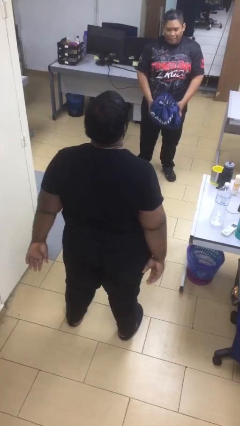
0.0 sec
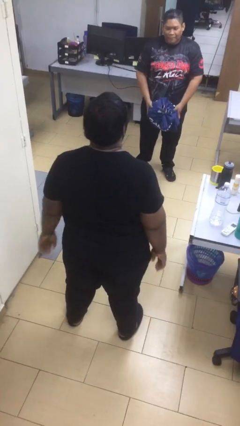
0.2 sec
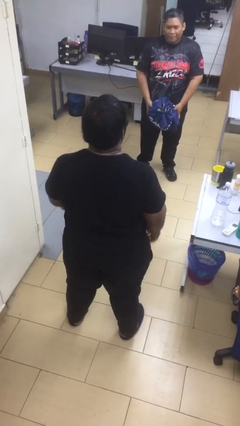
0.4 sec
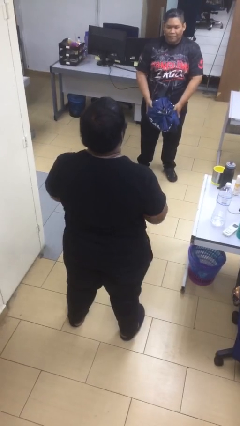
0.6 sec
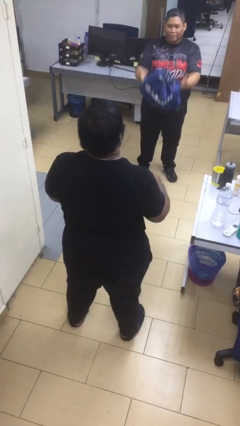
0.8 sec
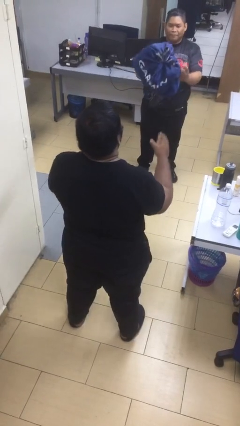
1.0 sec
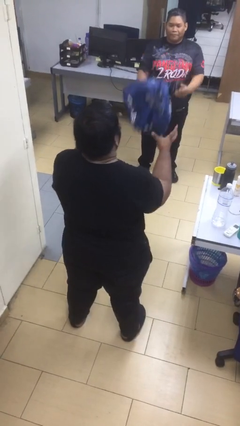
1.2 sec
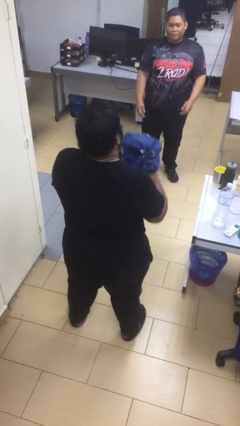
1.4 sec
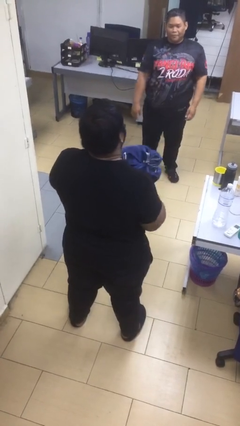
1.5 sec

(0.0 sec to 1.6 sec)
person catches object from person

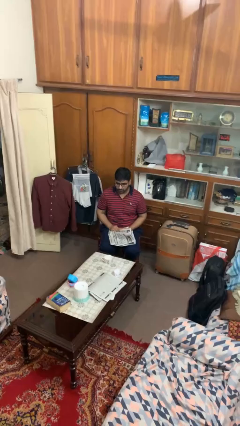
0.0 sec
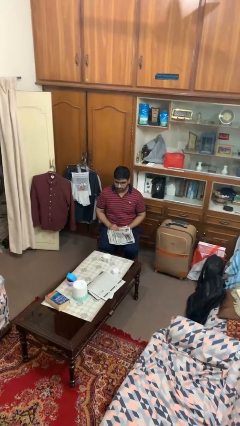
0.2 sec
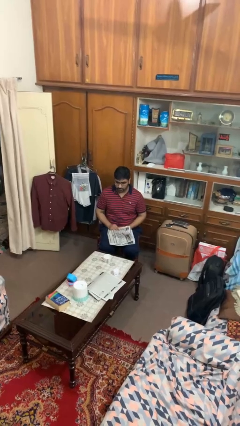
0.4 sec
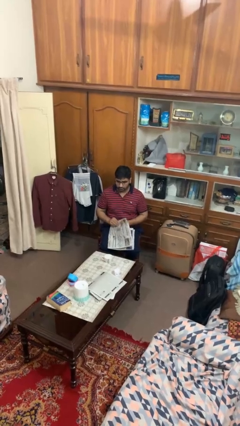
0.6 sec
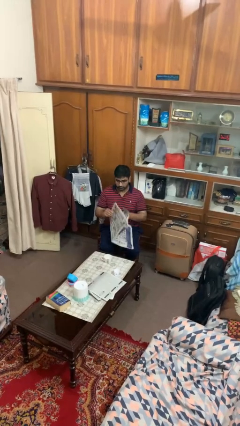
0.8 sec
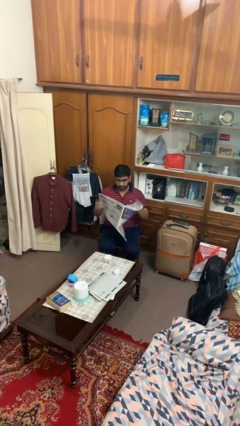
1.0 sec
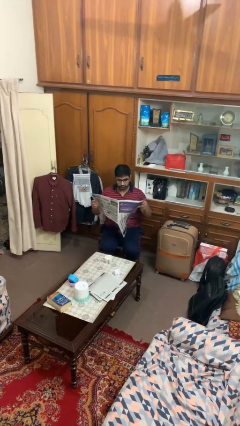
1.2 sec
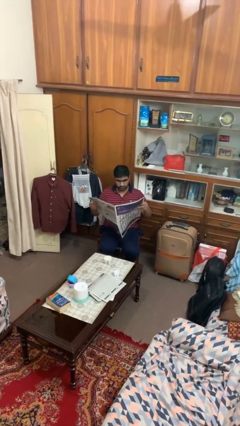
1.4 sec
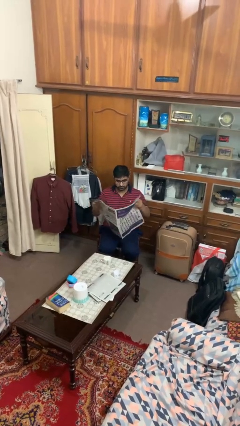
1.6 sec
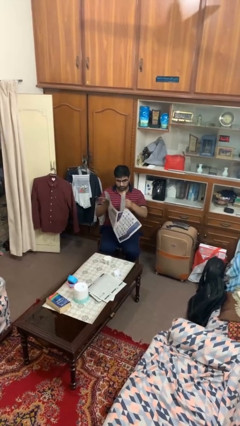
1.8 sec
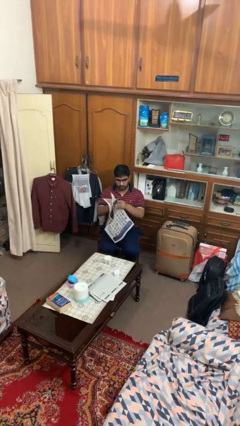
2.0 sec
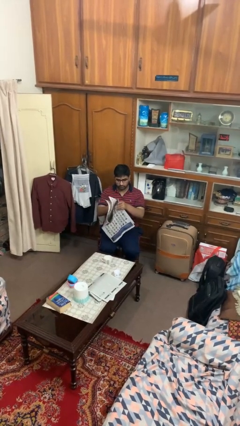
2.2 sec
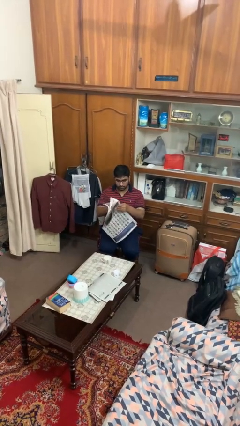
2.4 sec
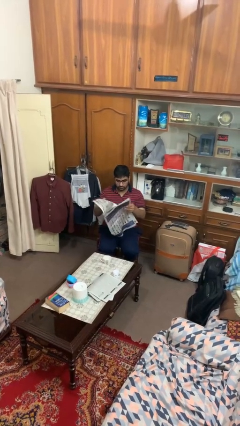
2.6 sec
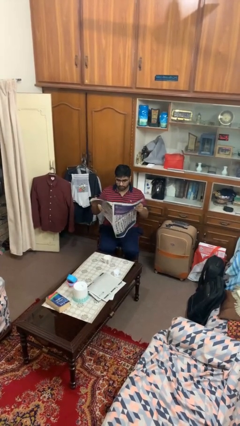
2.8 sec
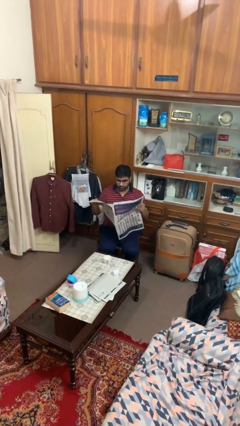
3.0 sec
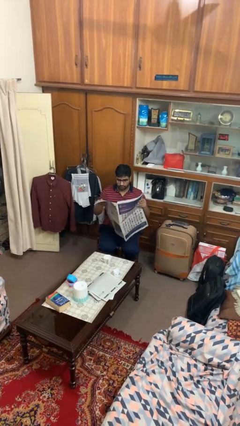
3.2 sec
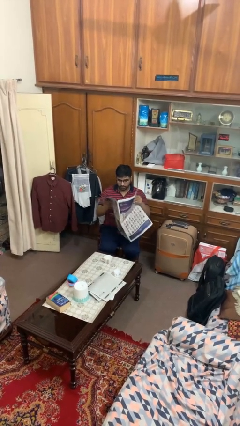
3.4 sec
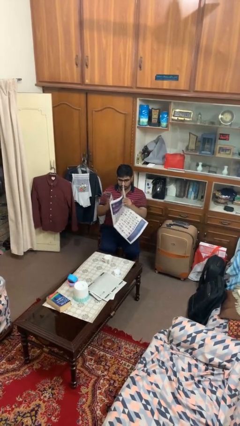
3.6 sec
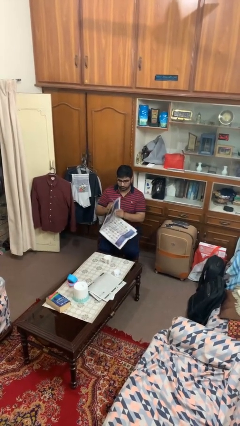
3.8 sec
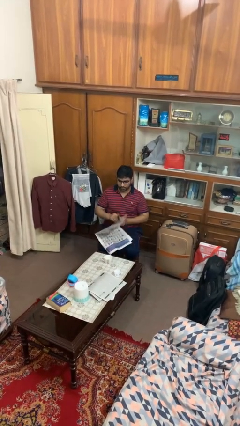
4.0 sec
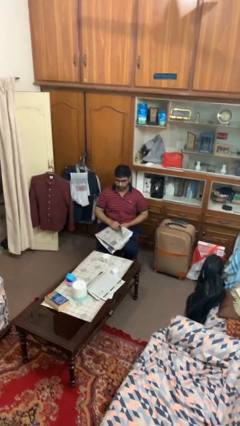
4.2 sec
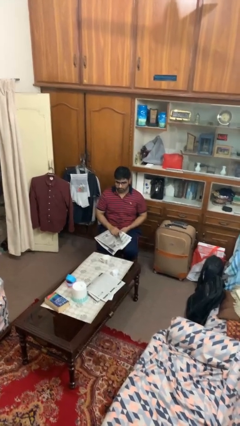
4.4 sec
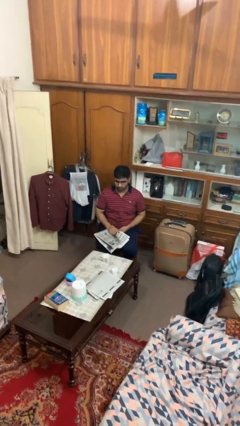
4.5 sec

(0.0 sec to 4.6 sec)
person reads newspaper

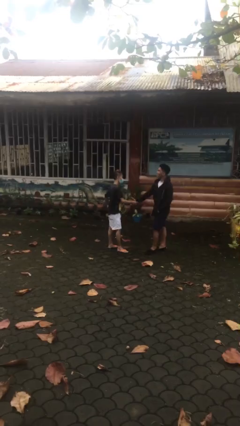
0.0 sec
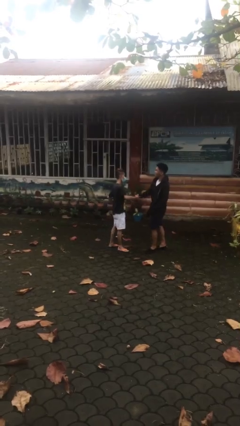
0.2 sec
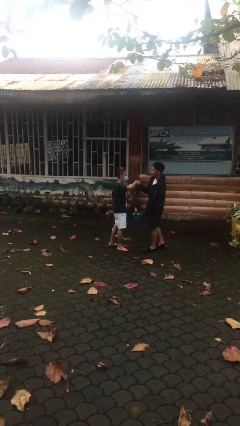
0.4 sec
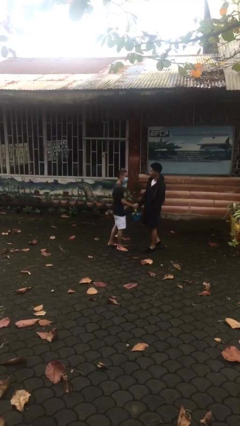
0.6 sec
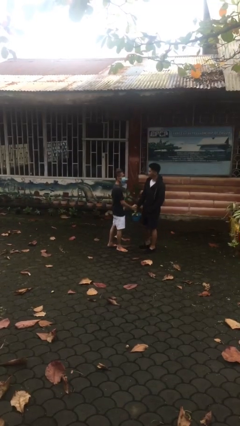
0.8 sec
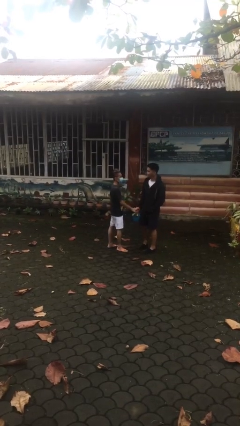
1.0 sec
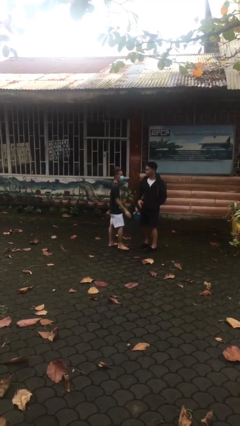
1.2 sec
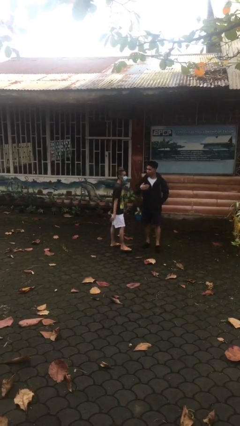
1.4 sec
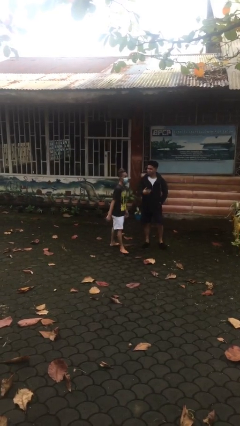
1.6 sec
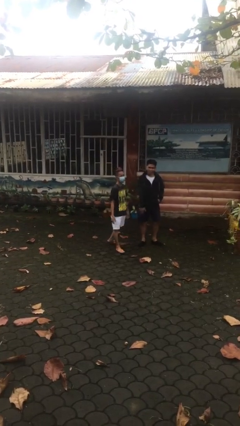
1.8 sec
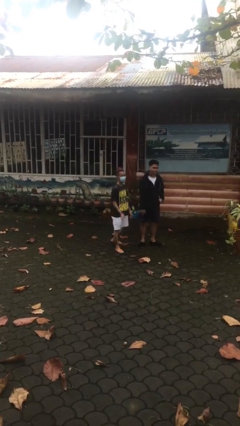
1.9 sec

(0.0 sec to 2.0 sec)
person shakes hand

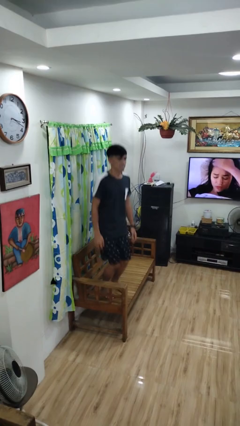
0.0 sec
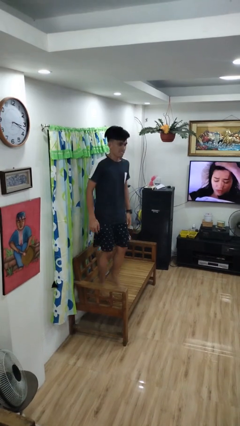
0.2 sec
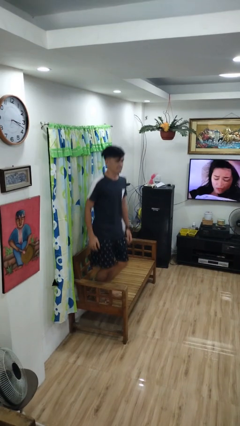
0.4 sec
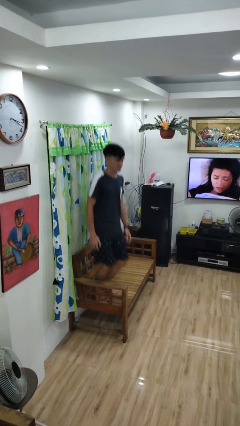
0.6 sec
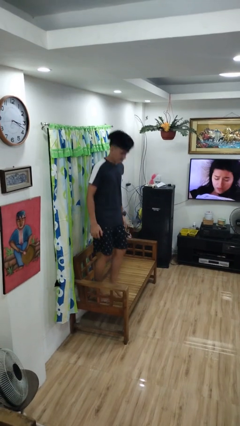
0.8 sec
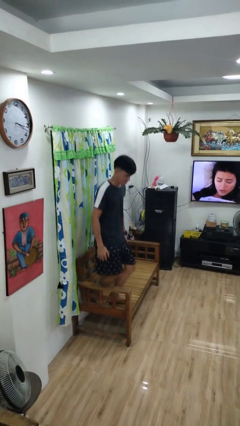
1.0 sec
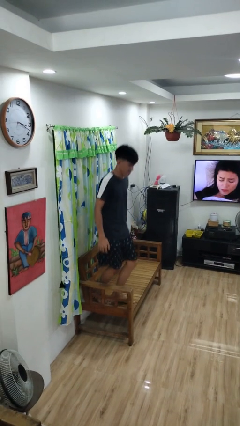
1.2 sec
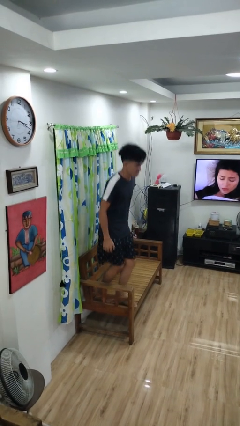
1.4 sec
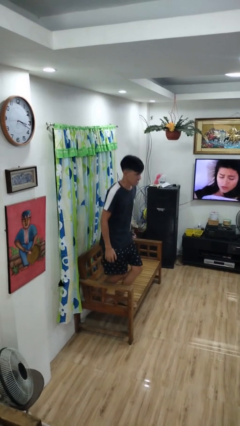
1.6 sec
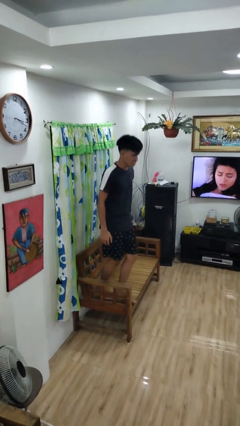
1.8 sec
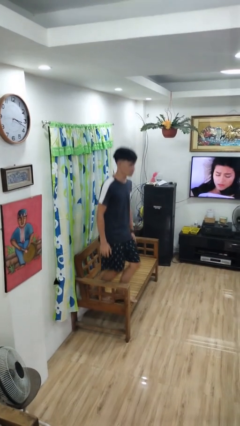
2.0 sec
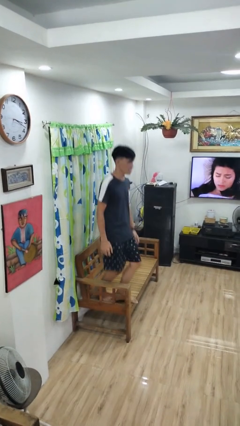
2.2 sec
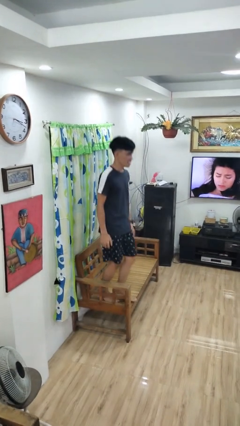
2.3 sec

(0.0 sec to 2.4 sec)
person jumps on couch

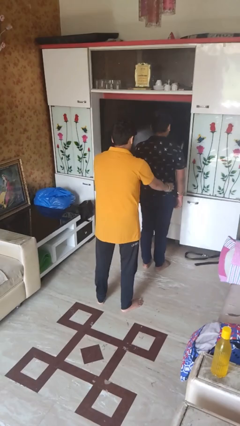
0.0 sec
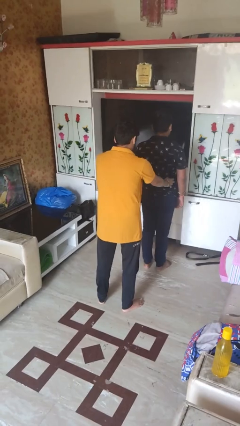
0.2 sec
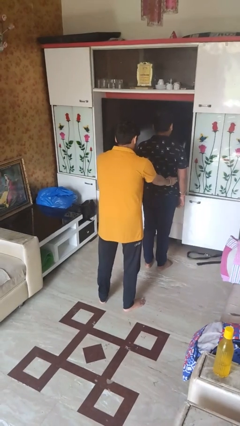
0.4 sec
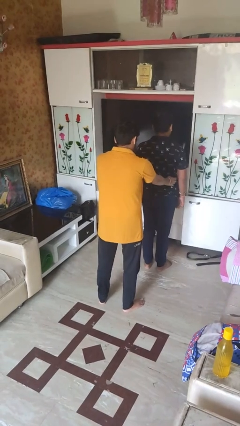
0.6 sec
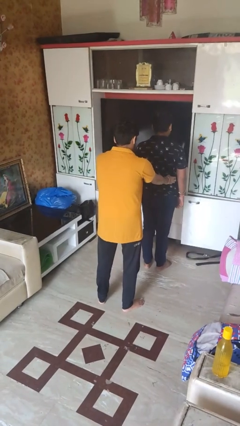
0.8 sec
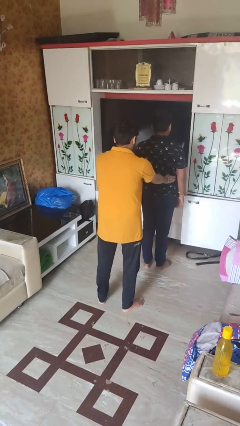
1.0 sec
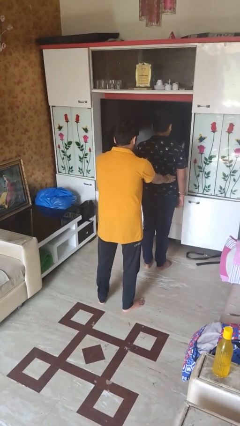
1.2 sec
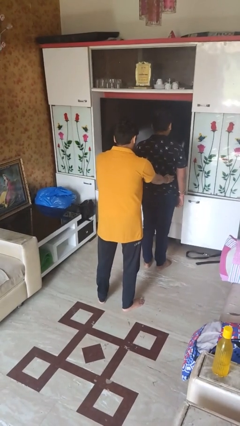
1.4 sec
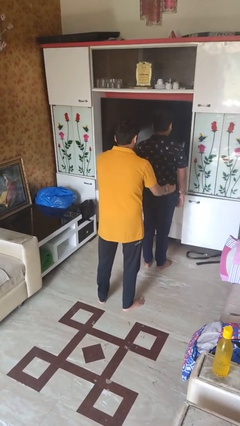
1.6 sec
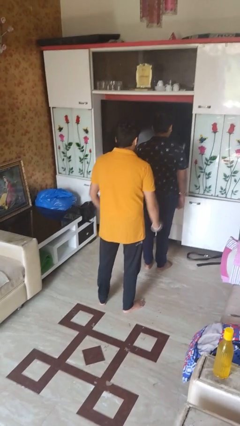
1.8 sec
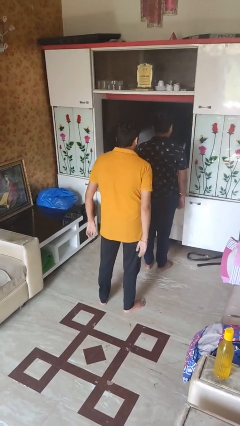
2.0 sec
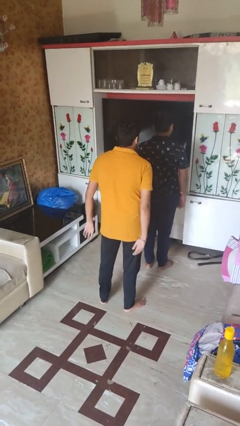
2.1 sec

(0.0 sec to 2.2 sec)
person tickles person

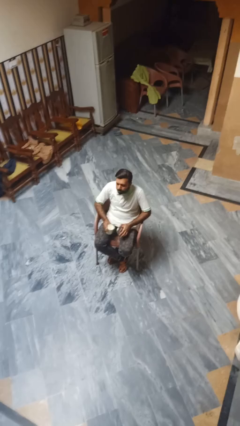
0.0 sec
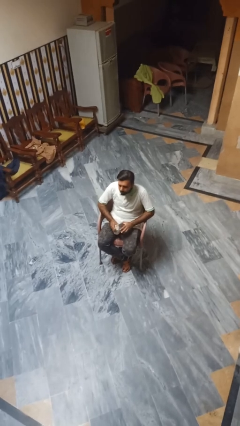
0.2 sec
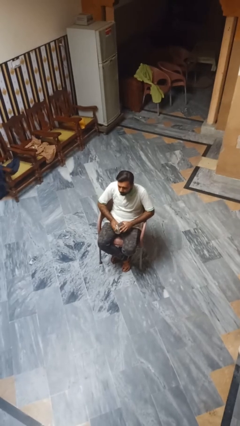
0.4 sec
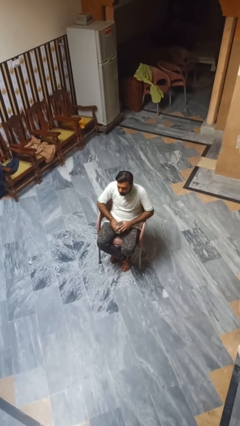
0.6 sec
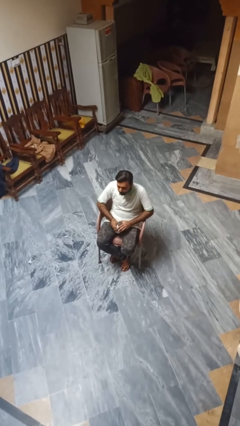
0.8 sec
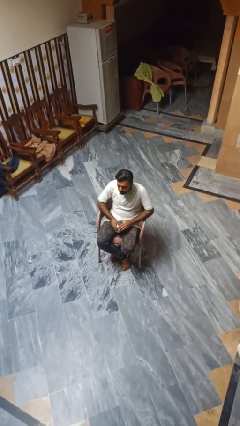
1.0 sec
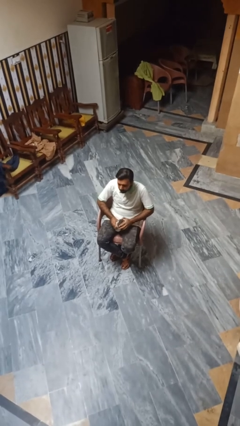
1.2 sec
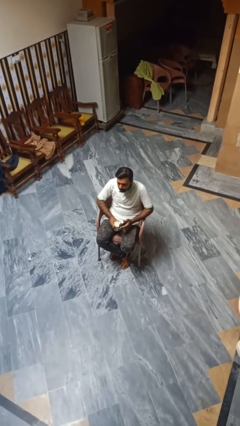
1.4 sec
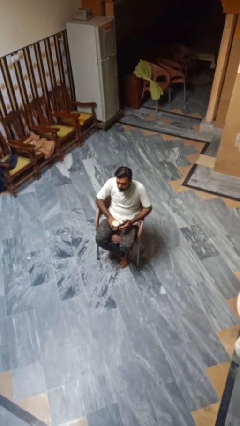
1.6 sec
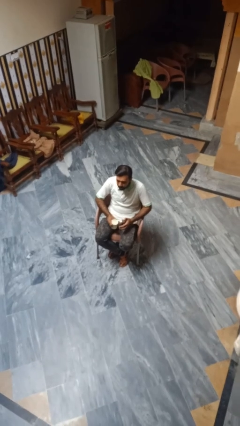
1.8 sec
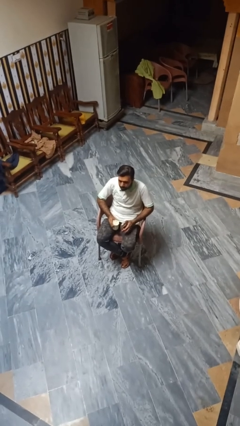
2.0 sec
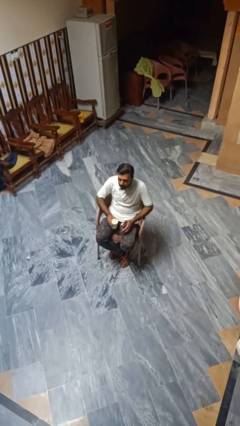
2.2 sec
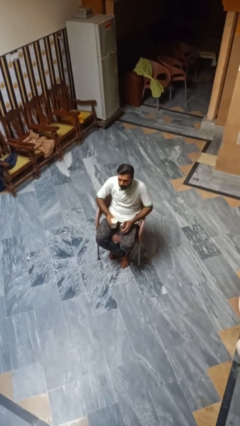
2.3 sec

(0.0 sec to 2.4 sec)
person opens beverage can

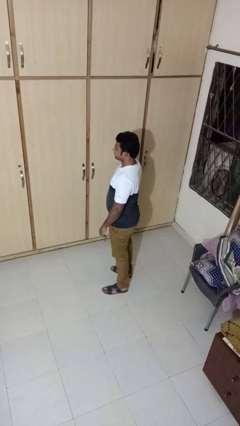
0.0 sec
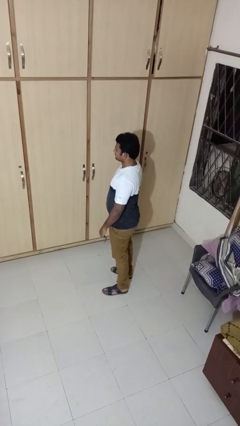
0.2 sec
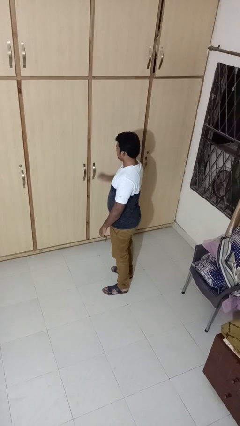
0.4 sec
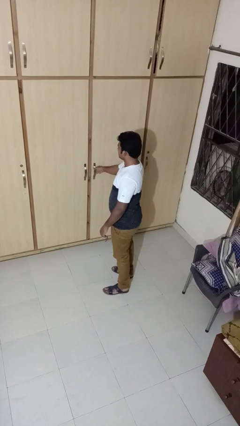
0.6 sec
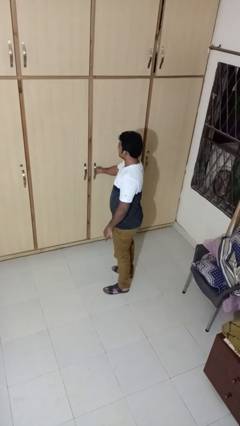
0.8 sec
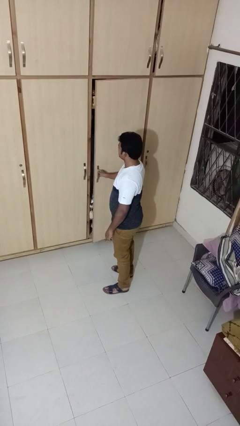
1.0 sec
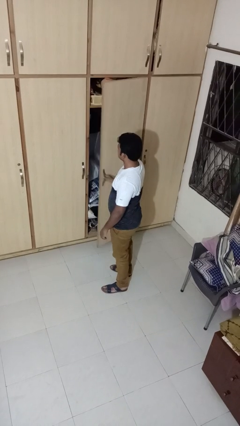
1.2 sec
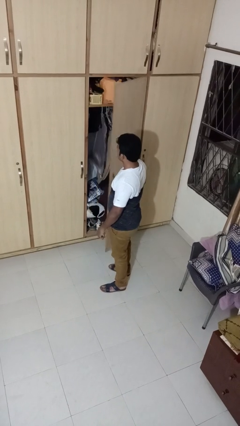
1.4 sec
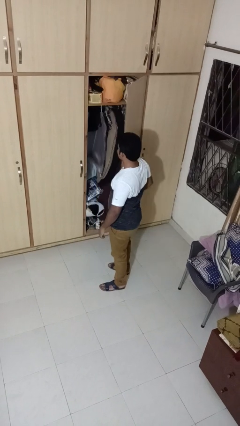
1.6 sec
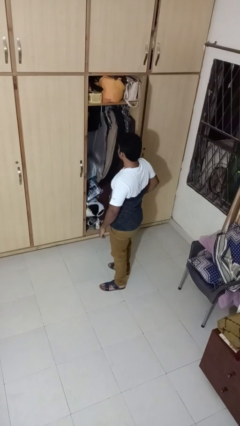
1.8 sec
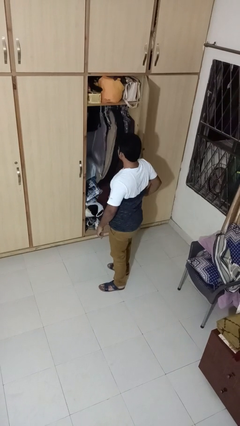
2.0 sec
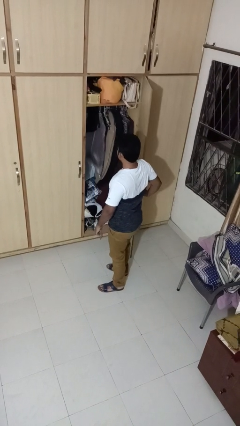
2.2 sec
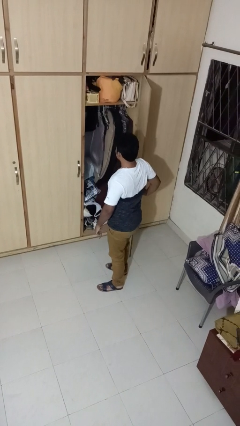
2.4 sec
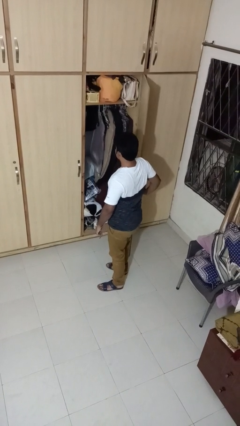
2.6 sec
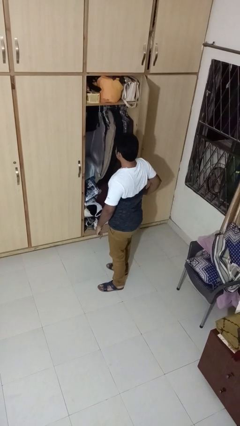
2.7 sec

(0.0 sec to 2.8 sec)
person opens closet door
